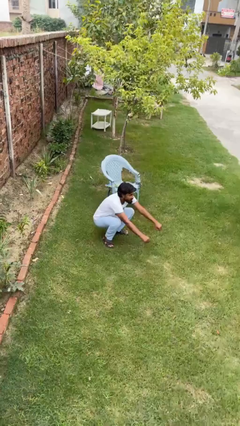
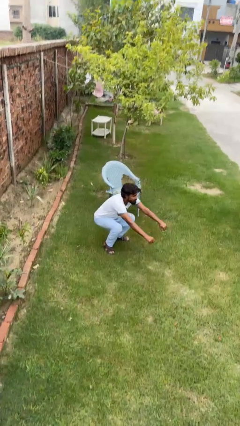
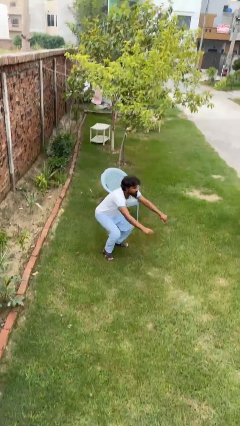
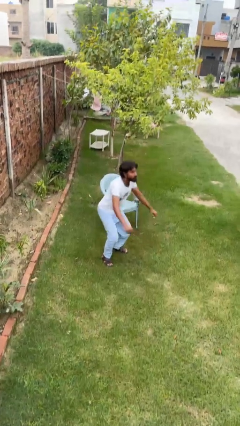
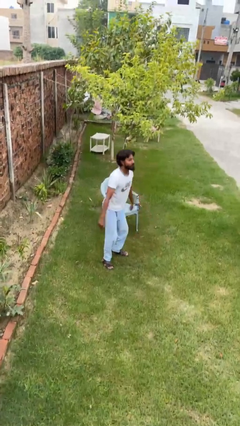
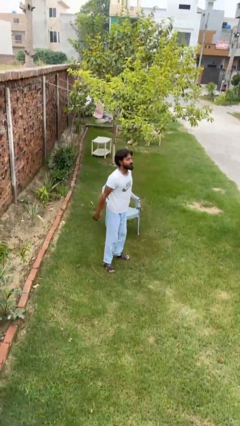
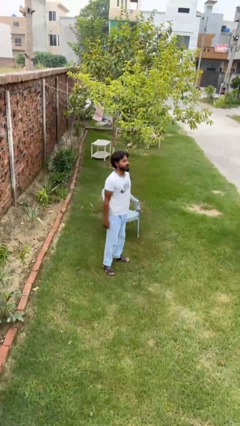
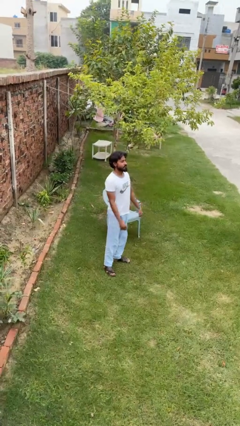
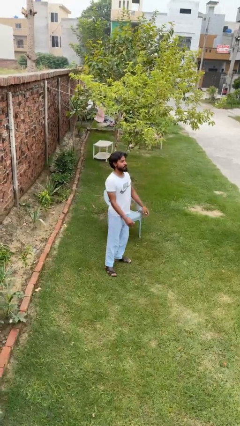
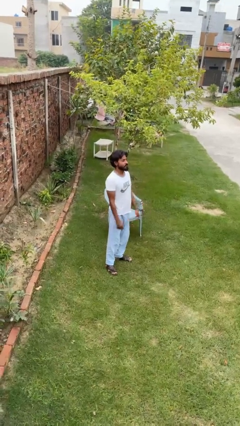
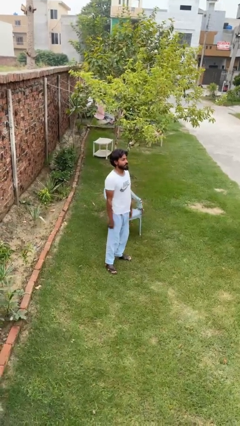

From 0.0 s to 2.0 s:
person stands up

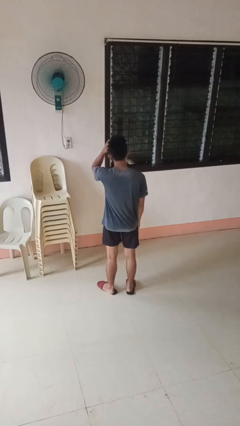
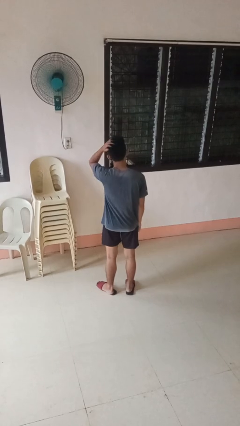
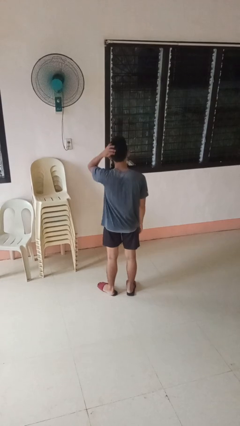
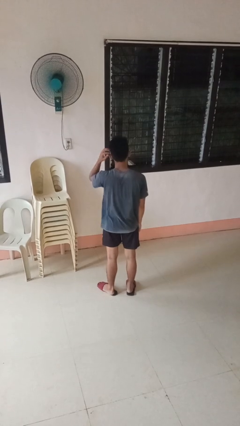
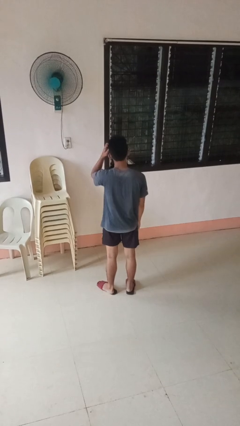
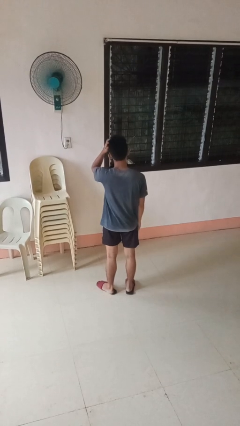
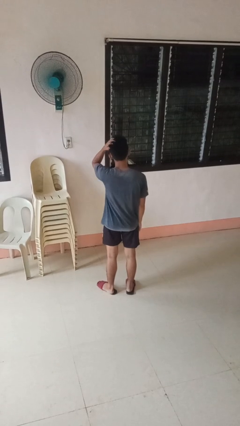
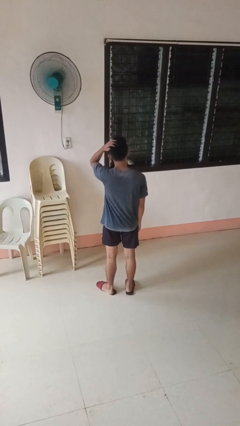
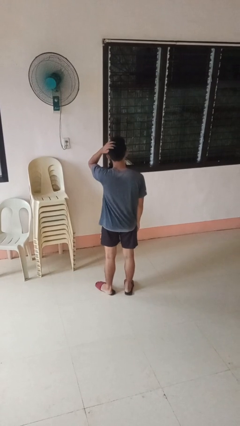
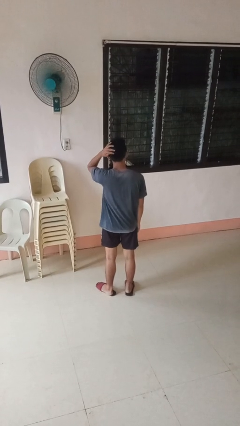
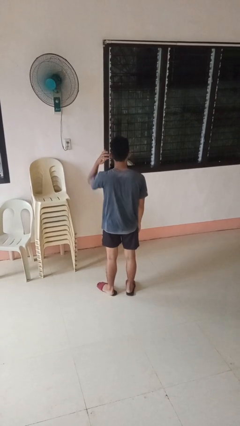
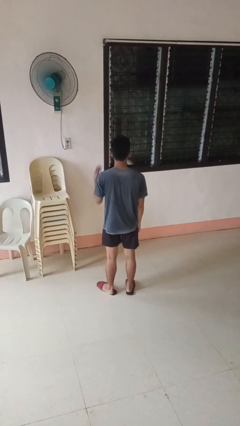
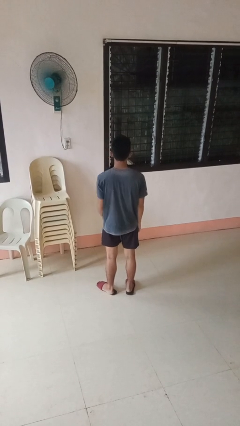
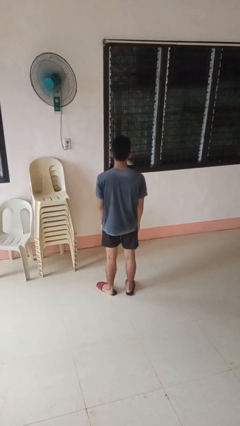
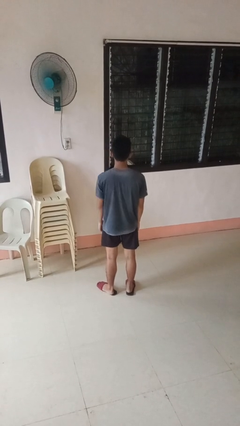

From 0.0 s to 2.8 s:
person strokes hair

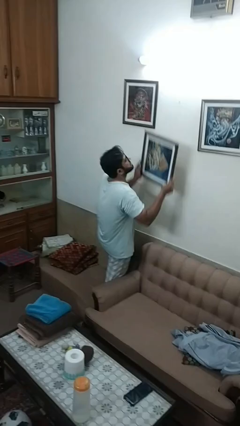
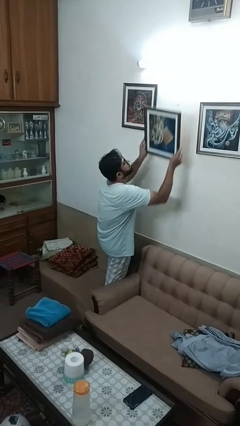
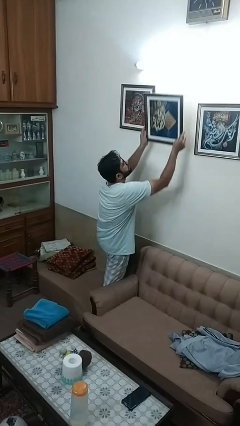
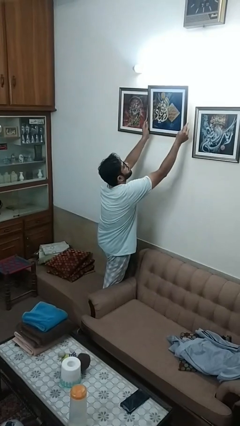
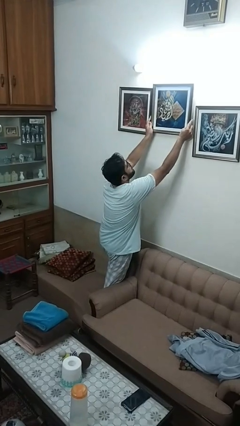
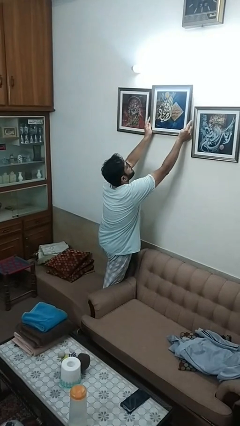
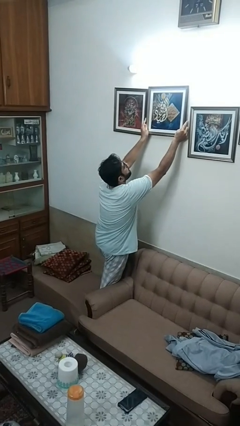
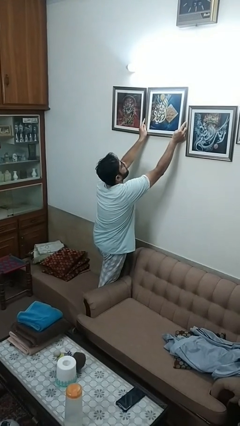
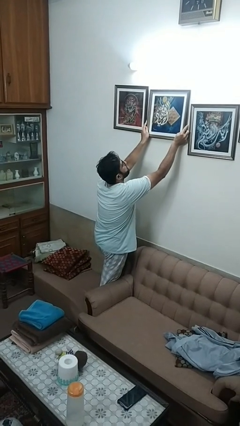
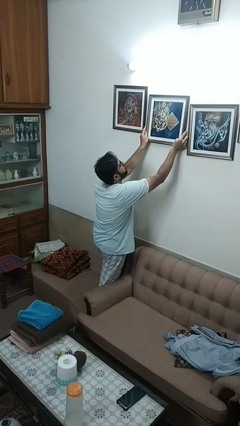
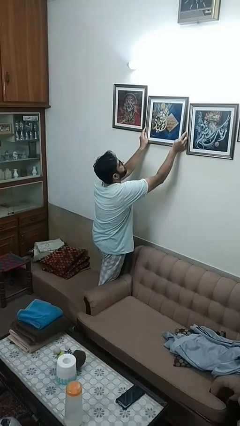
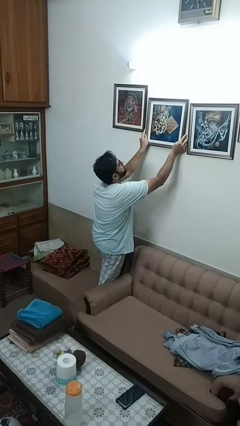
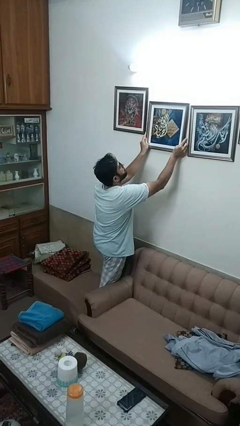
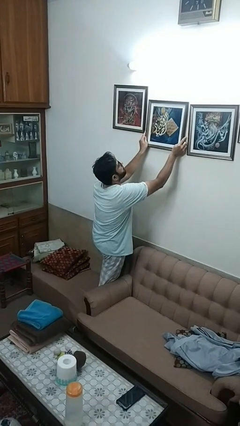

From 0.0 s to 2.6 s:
person puts up picture frame

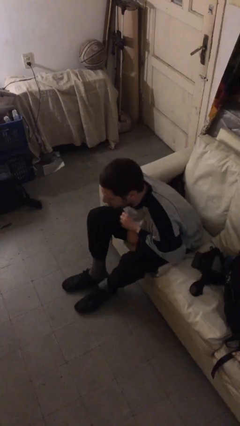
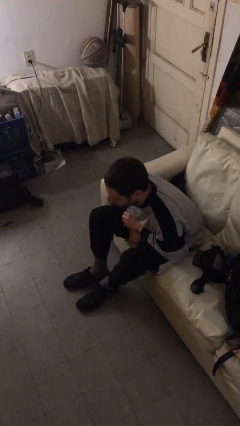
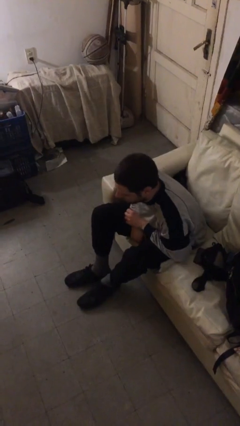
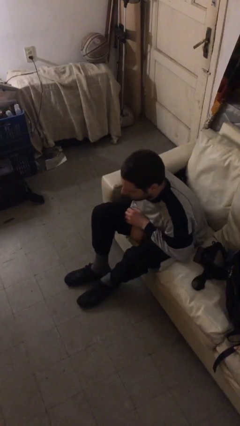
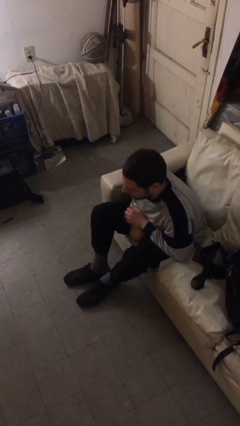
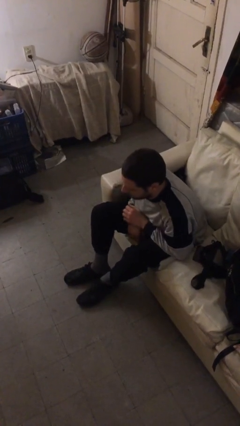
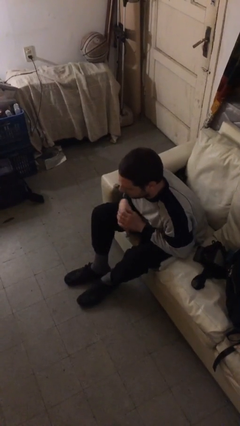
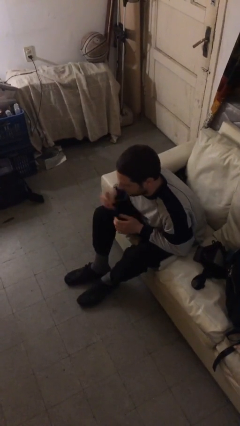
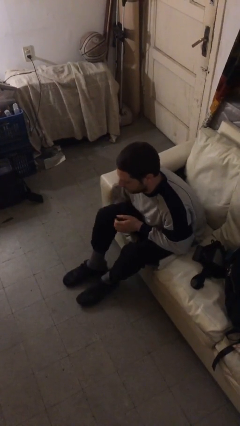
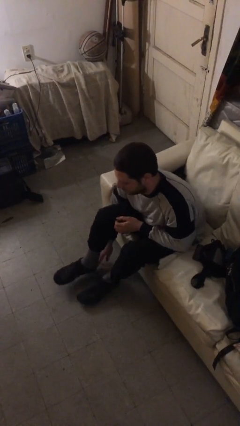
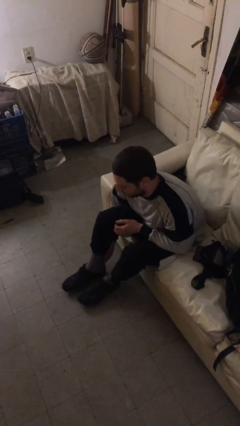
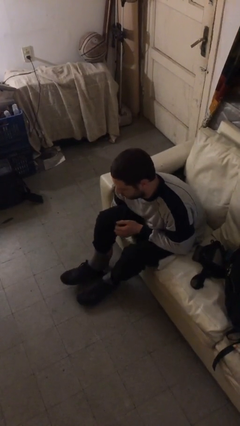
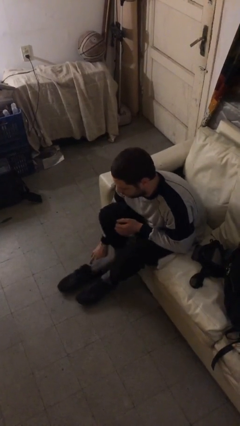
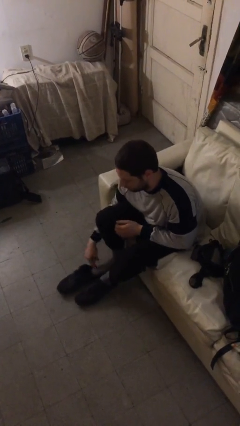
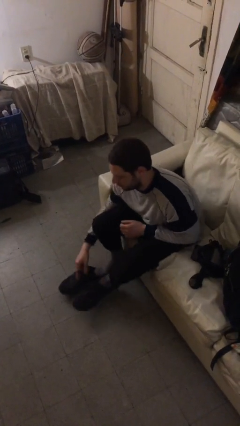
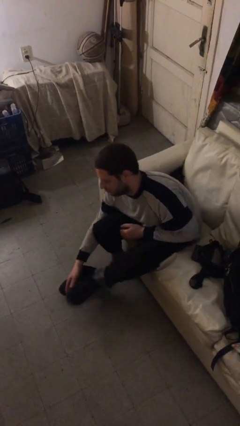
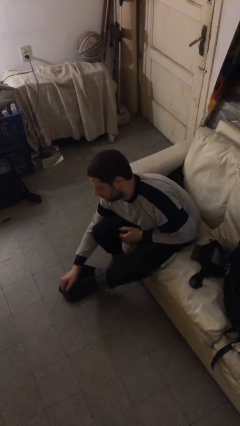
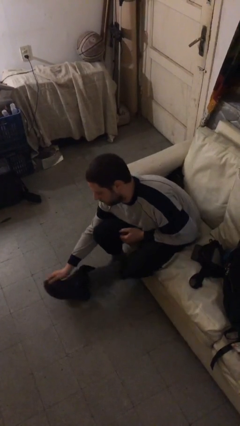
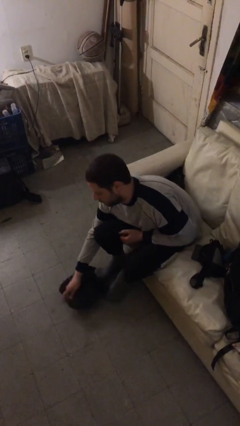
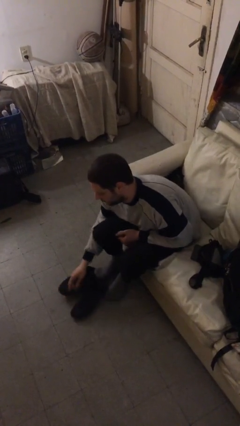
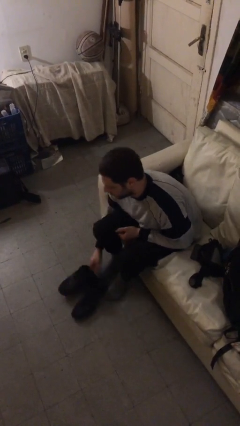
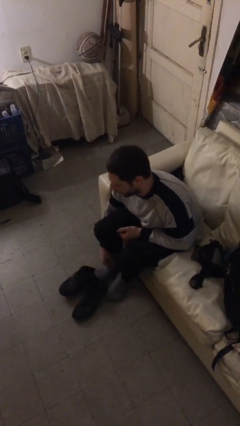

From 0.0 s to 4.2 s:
person takes off shoes

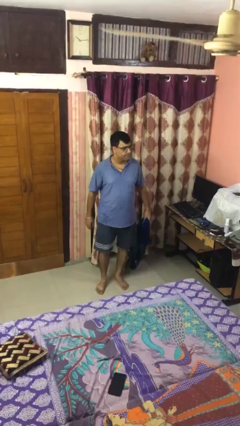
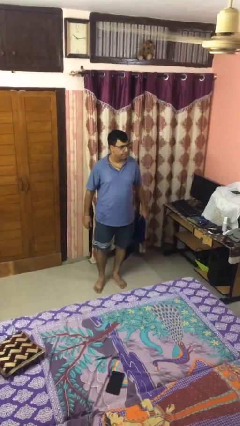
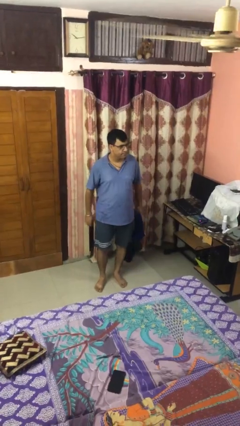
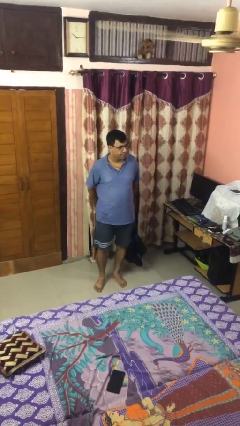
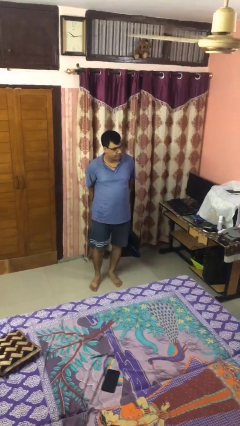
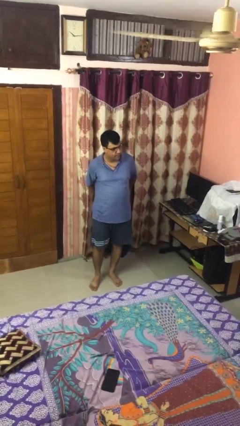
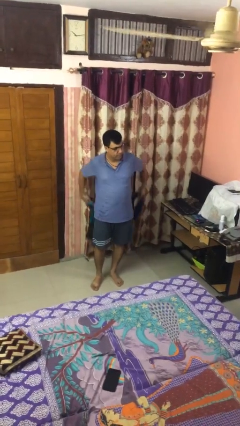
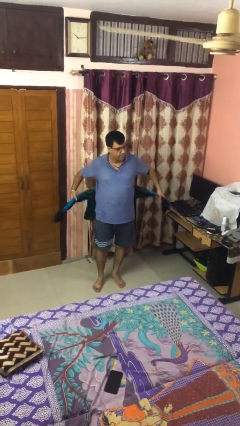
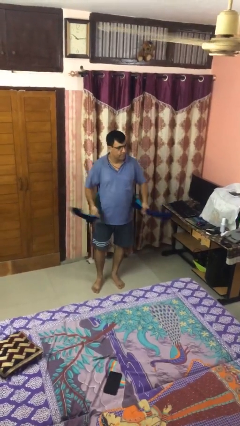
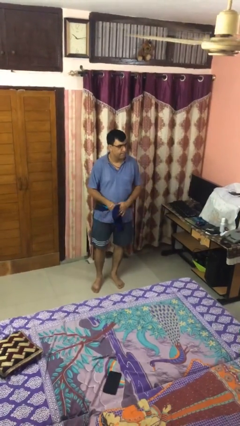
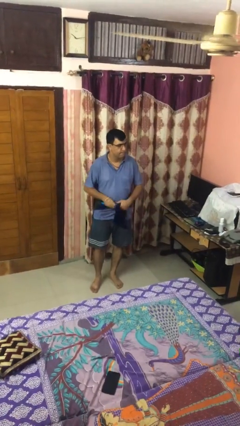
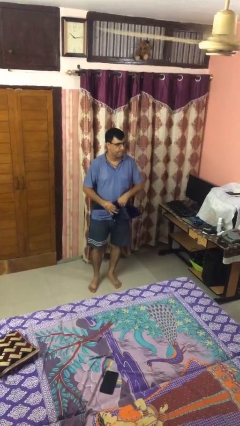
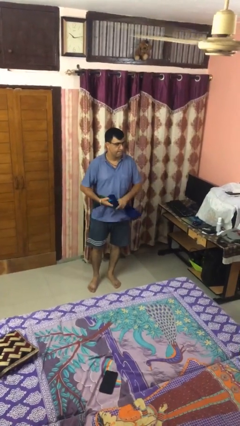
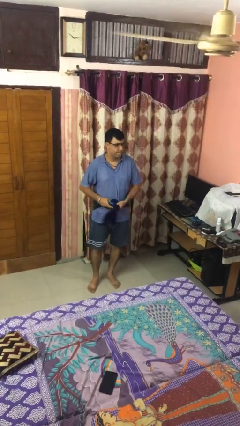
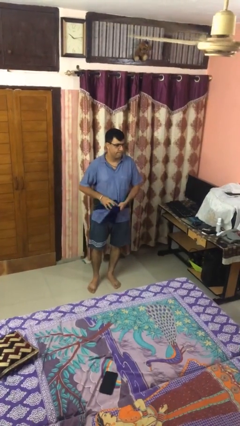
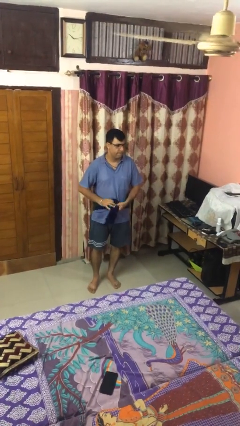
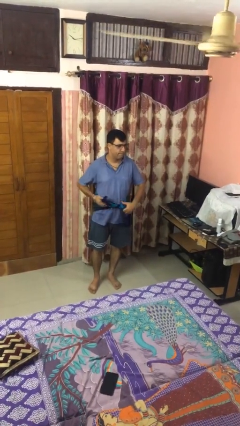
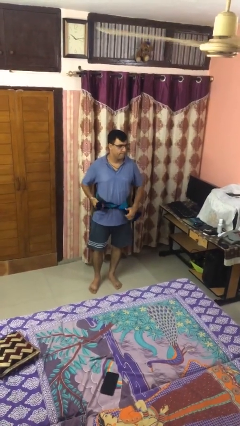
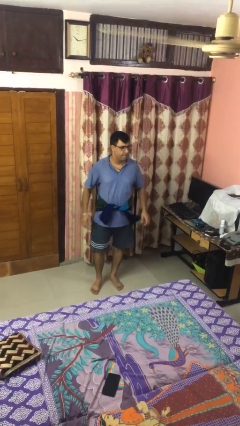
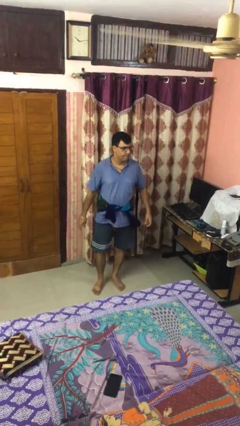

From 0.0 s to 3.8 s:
person ties jacket around waist

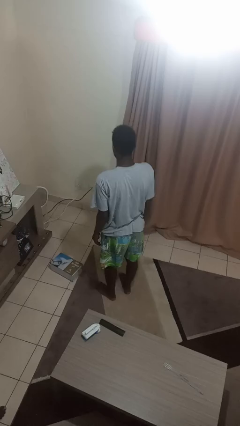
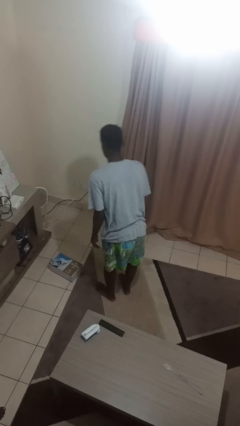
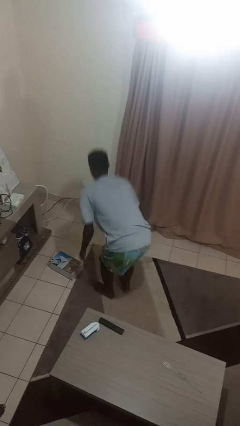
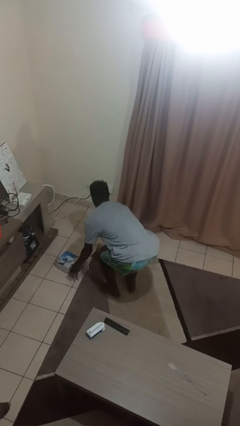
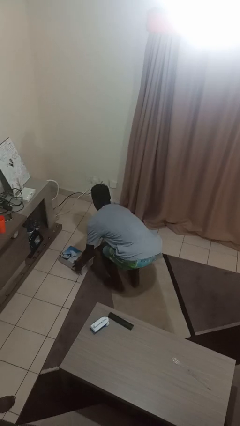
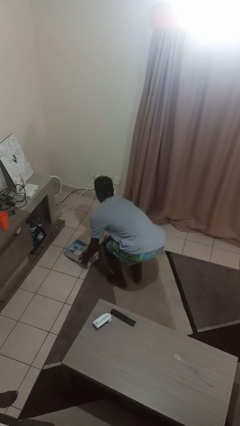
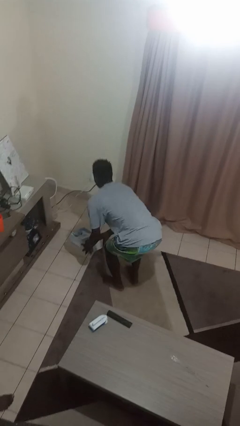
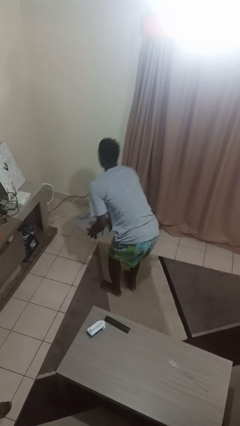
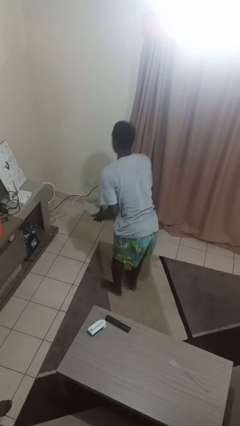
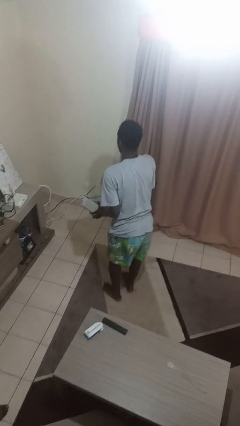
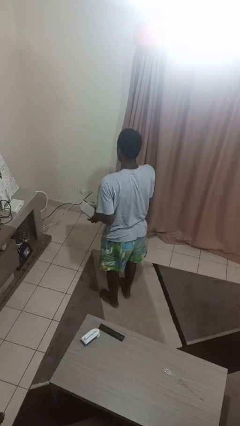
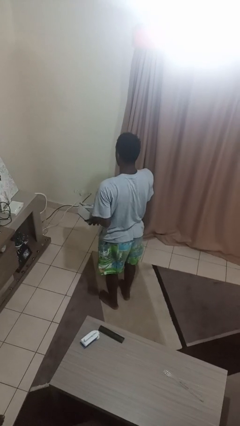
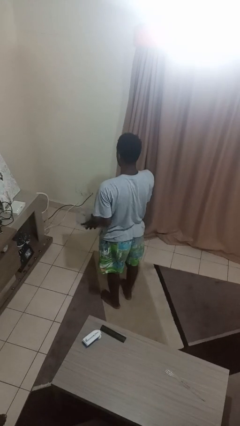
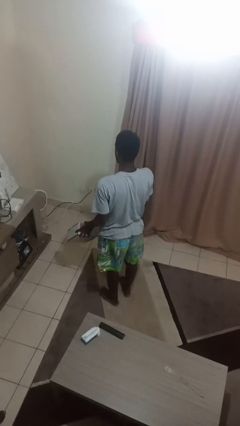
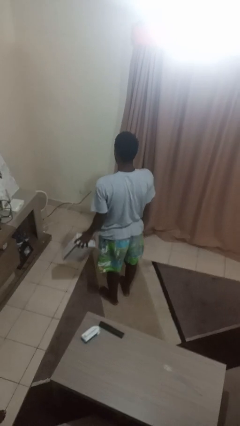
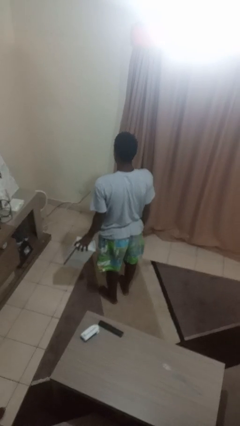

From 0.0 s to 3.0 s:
person picks up object from floor
